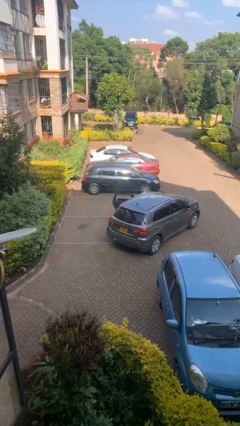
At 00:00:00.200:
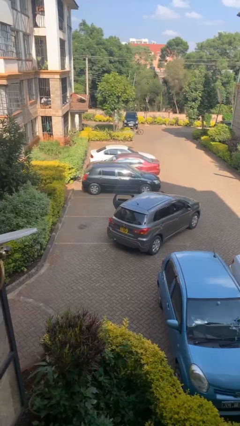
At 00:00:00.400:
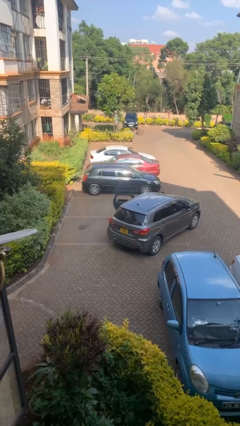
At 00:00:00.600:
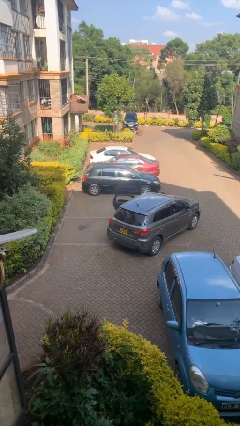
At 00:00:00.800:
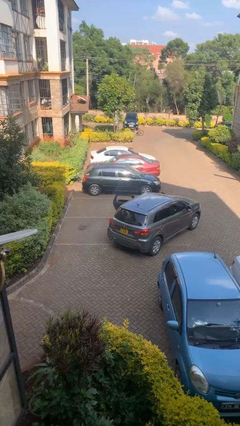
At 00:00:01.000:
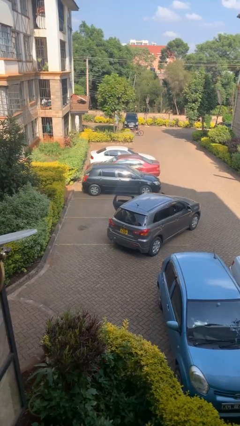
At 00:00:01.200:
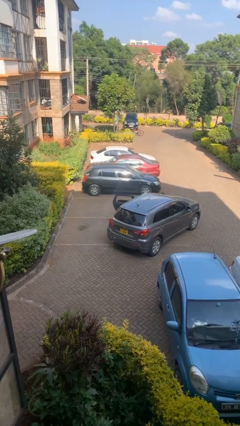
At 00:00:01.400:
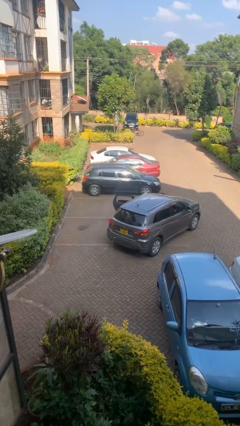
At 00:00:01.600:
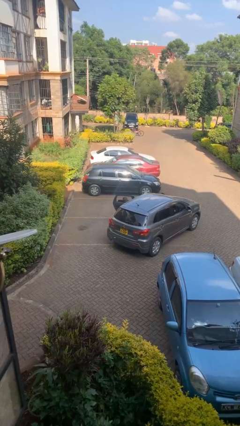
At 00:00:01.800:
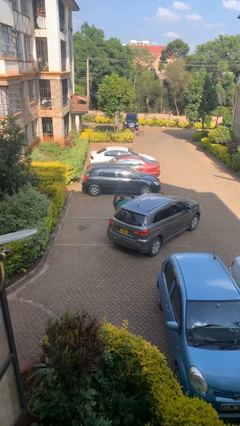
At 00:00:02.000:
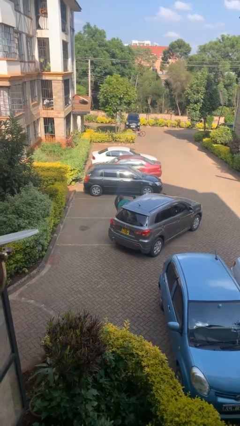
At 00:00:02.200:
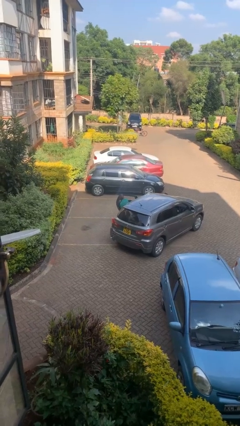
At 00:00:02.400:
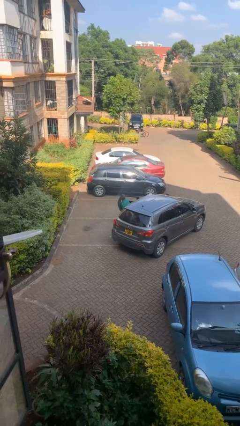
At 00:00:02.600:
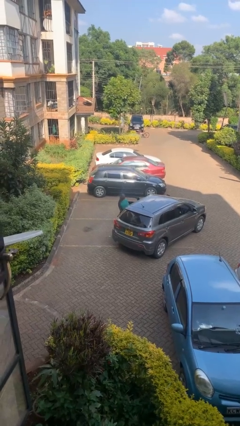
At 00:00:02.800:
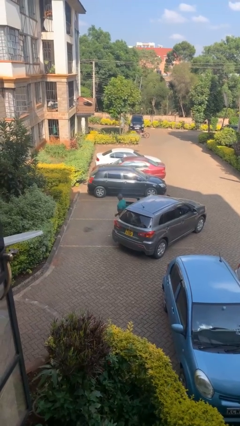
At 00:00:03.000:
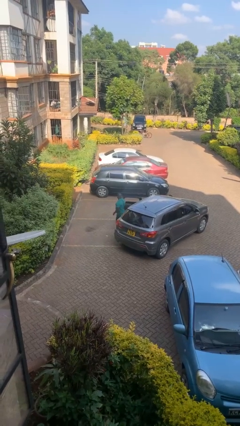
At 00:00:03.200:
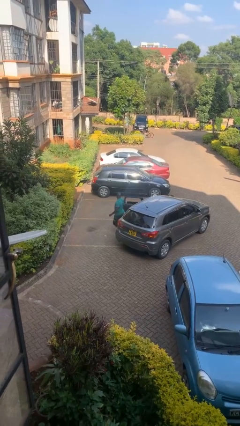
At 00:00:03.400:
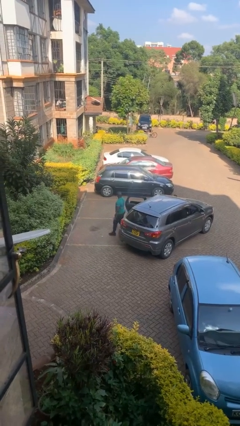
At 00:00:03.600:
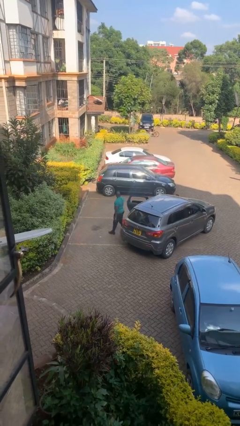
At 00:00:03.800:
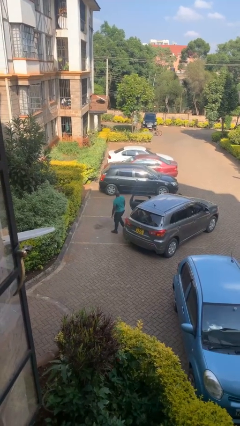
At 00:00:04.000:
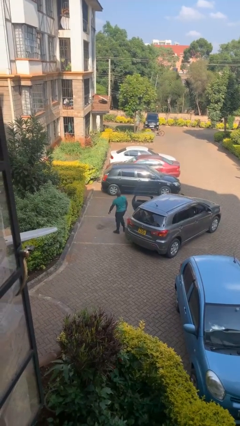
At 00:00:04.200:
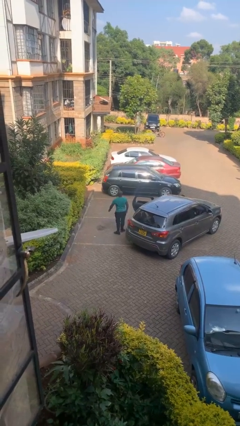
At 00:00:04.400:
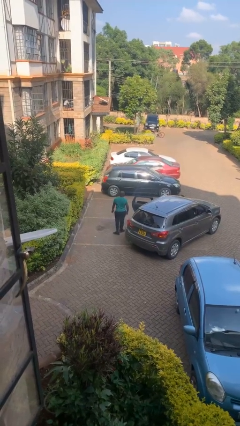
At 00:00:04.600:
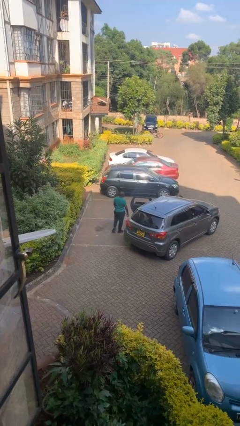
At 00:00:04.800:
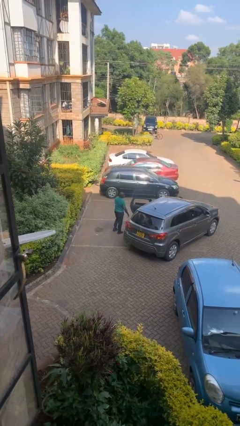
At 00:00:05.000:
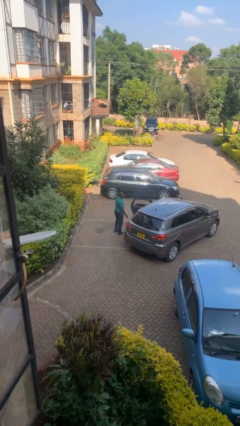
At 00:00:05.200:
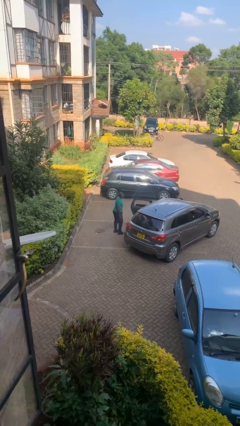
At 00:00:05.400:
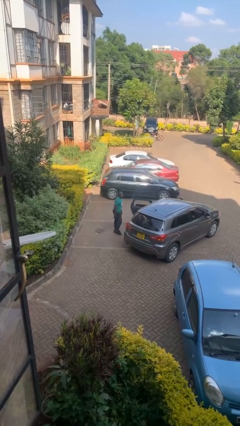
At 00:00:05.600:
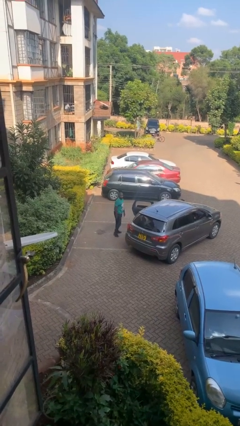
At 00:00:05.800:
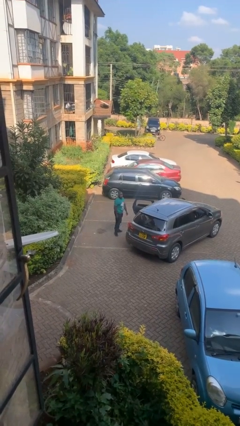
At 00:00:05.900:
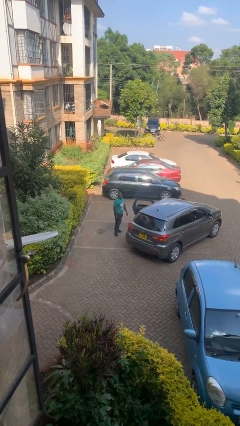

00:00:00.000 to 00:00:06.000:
person exits car

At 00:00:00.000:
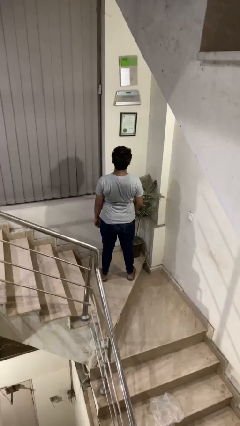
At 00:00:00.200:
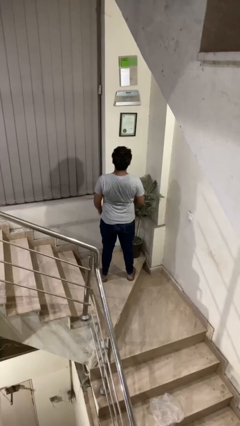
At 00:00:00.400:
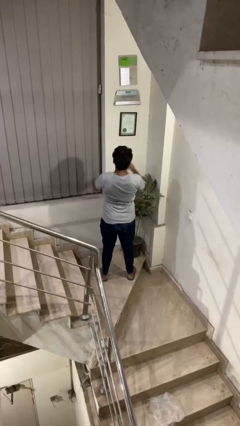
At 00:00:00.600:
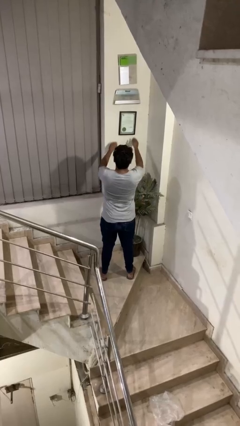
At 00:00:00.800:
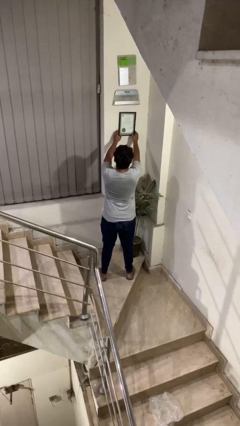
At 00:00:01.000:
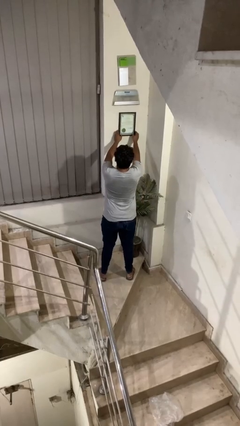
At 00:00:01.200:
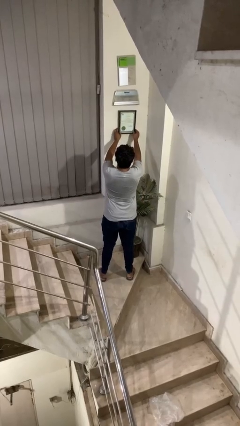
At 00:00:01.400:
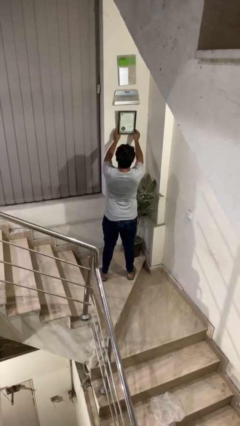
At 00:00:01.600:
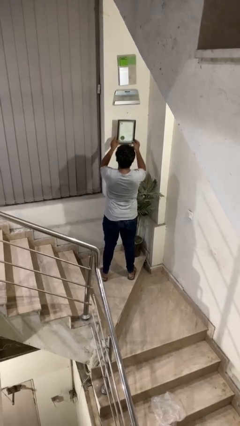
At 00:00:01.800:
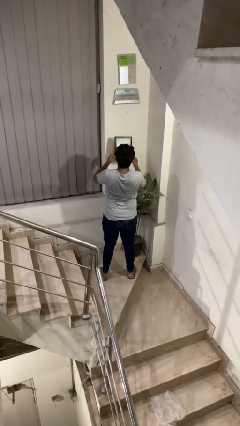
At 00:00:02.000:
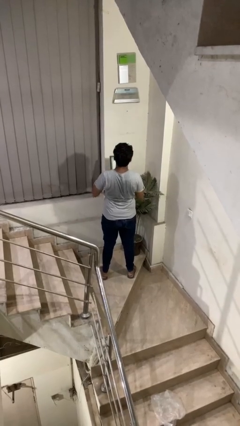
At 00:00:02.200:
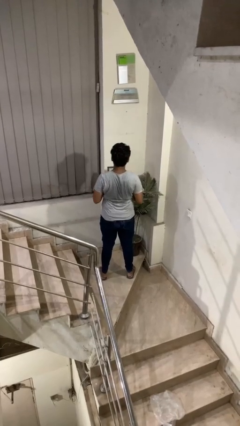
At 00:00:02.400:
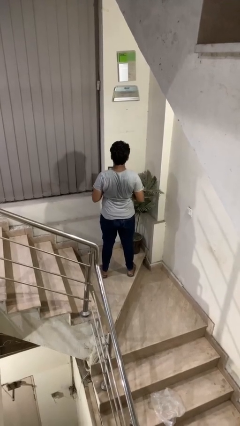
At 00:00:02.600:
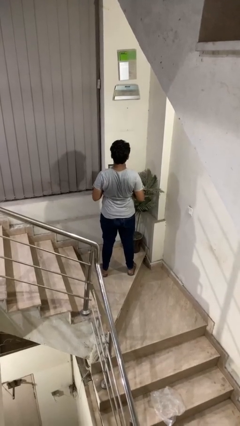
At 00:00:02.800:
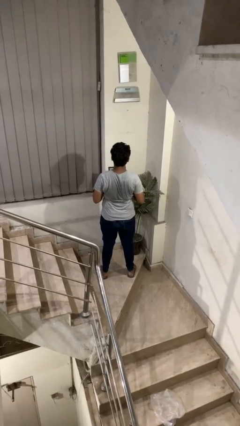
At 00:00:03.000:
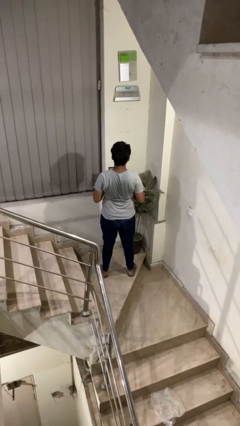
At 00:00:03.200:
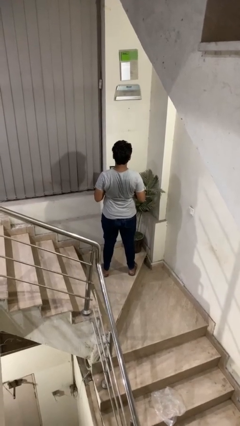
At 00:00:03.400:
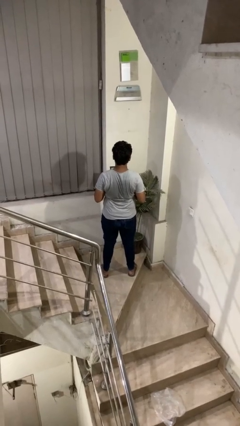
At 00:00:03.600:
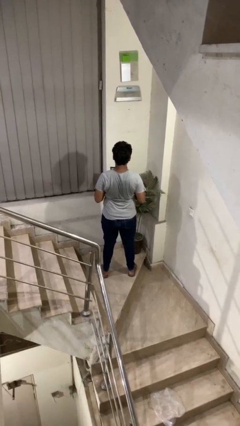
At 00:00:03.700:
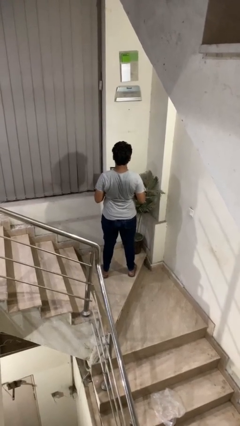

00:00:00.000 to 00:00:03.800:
person takes down picture frame

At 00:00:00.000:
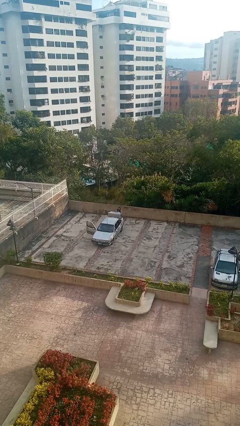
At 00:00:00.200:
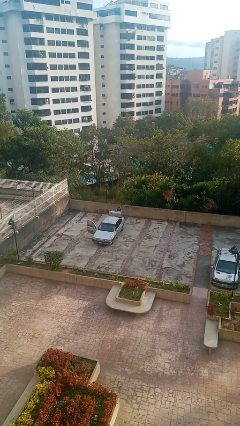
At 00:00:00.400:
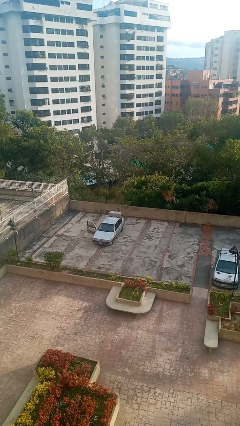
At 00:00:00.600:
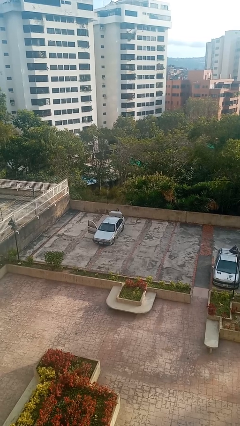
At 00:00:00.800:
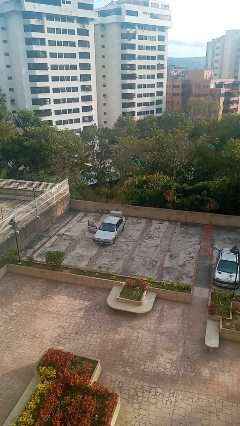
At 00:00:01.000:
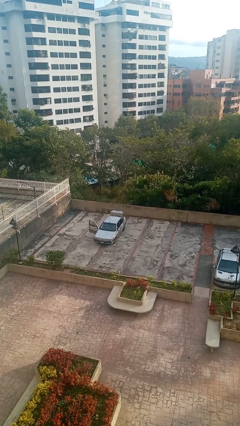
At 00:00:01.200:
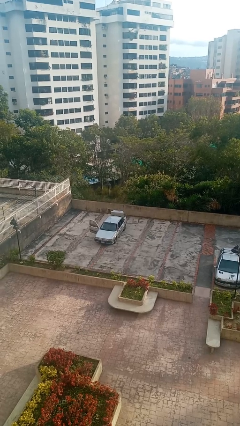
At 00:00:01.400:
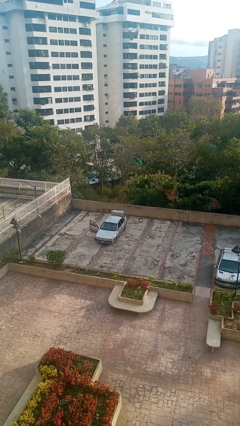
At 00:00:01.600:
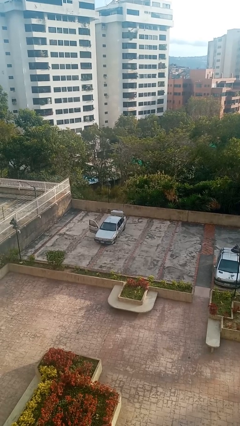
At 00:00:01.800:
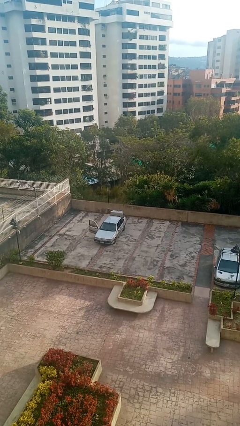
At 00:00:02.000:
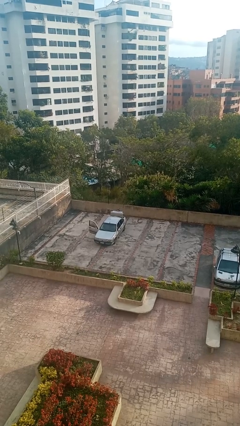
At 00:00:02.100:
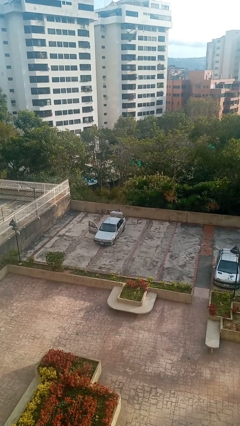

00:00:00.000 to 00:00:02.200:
person loads car

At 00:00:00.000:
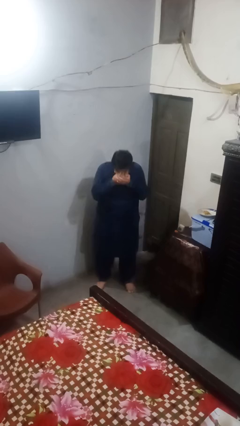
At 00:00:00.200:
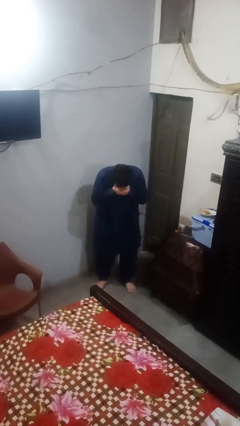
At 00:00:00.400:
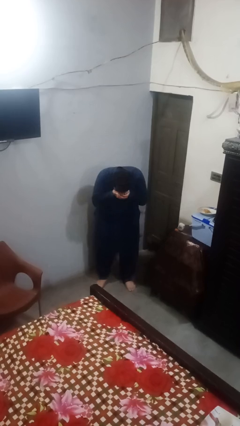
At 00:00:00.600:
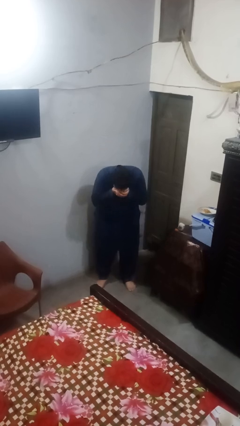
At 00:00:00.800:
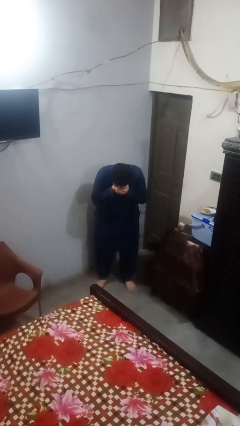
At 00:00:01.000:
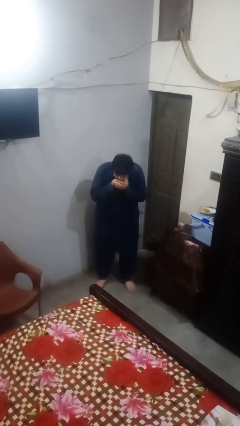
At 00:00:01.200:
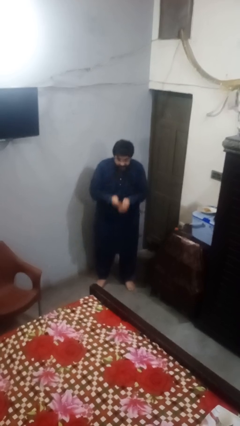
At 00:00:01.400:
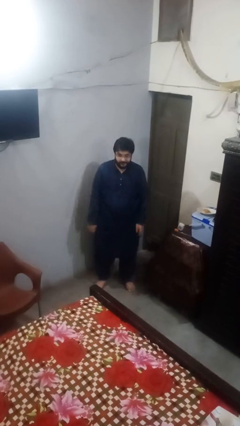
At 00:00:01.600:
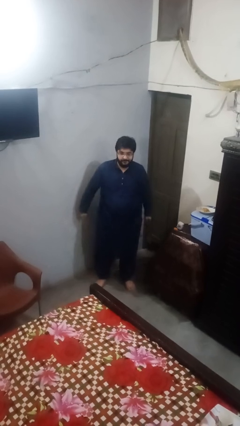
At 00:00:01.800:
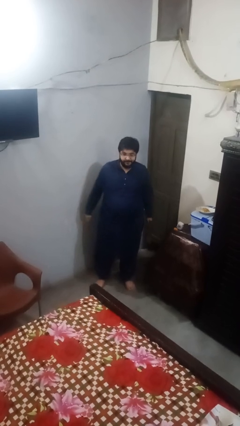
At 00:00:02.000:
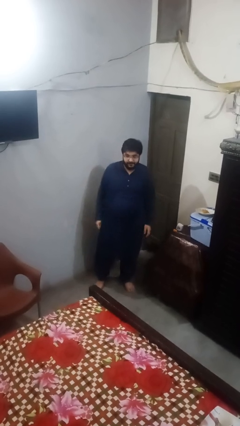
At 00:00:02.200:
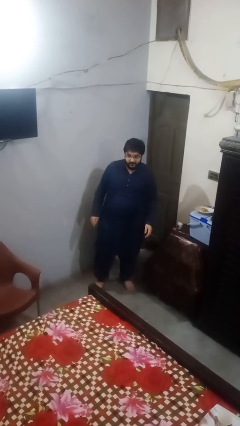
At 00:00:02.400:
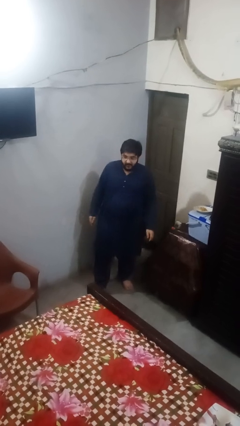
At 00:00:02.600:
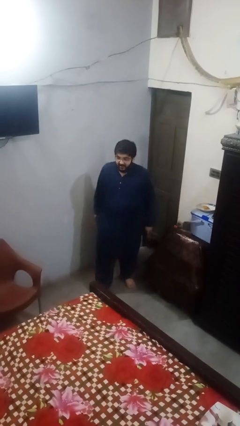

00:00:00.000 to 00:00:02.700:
person sneezes into hand

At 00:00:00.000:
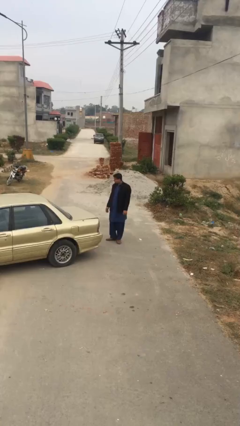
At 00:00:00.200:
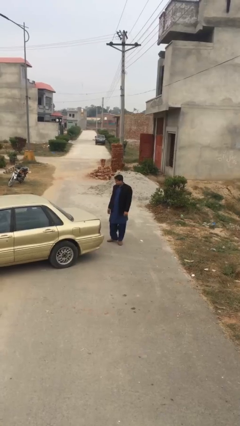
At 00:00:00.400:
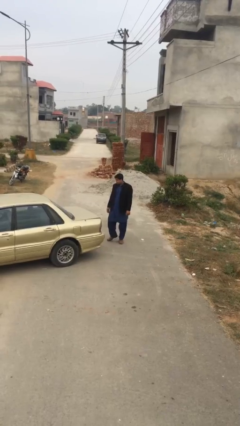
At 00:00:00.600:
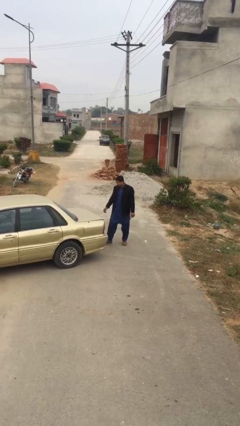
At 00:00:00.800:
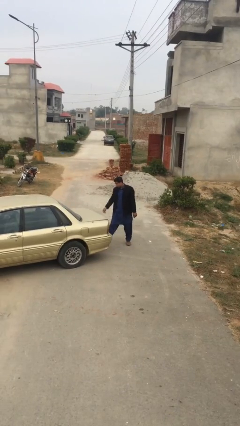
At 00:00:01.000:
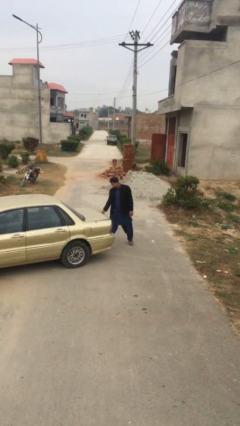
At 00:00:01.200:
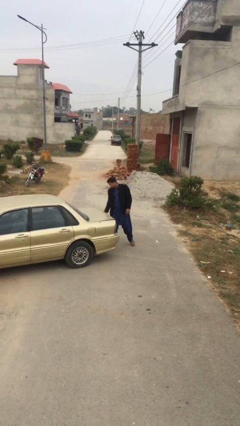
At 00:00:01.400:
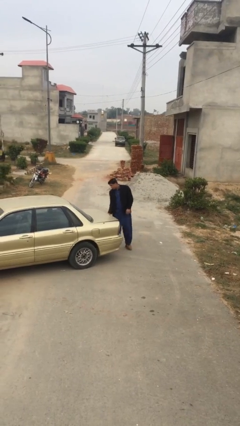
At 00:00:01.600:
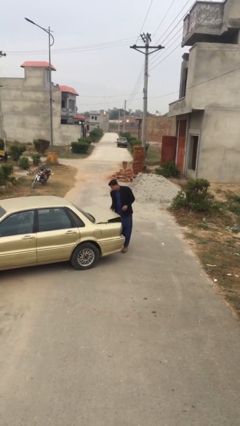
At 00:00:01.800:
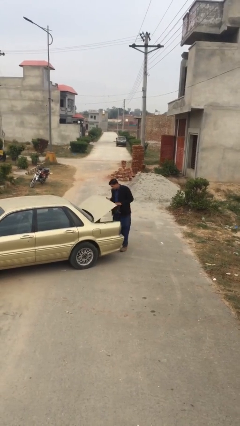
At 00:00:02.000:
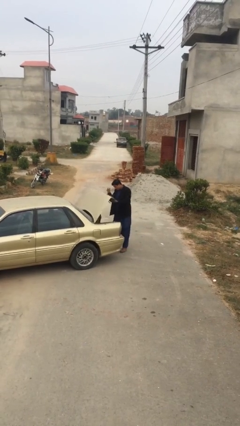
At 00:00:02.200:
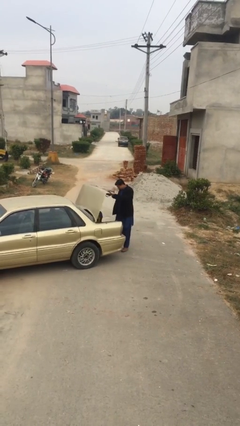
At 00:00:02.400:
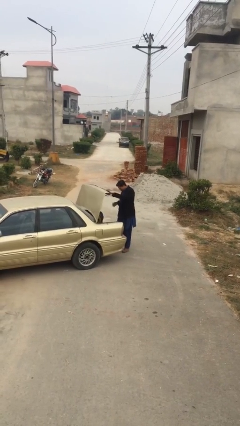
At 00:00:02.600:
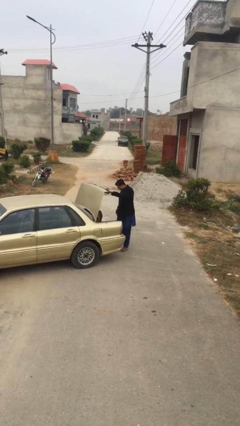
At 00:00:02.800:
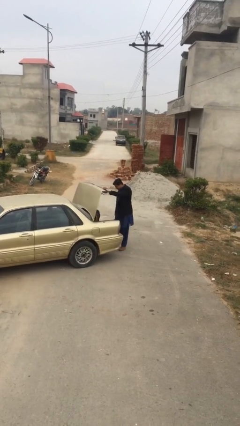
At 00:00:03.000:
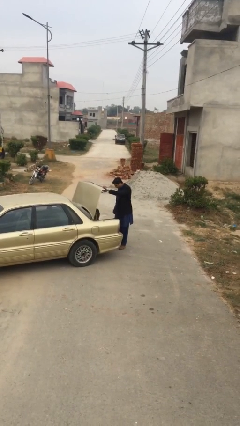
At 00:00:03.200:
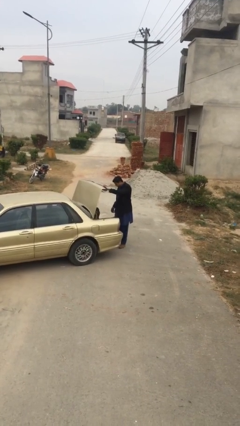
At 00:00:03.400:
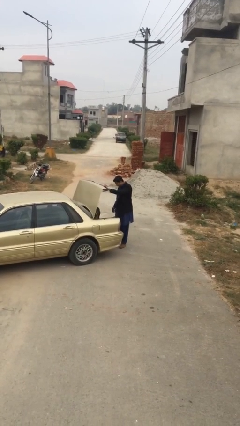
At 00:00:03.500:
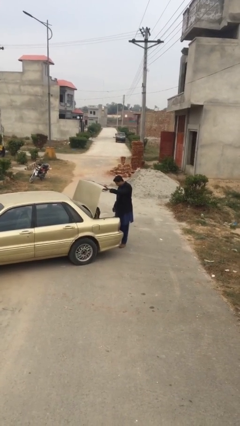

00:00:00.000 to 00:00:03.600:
person opens car trunk
